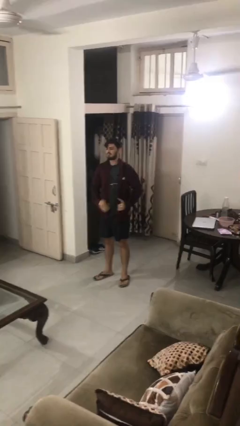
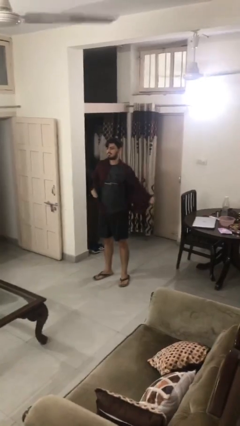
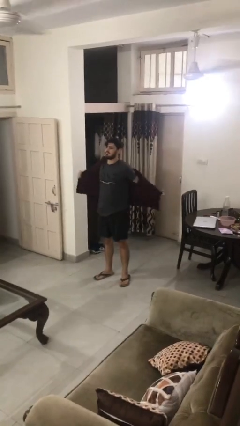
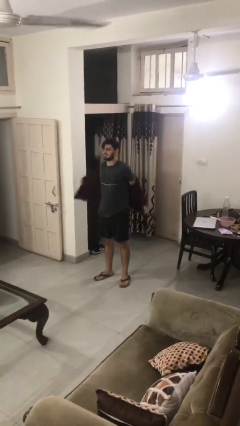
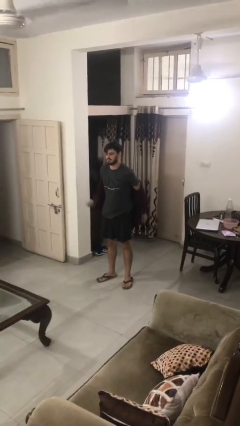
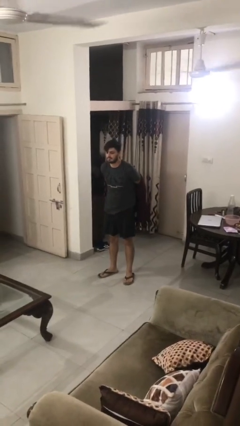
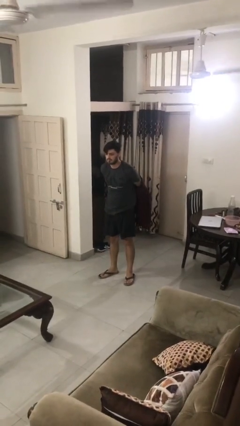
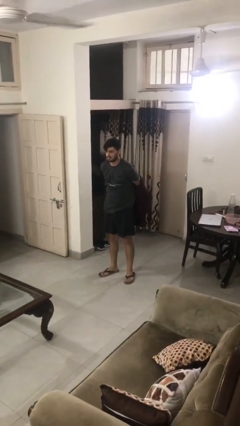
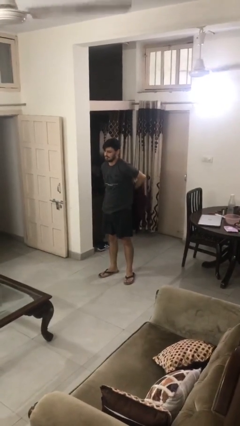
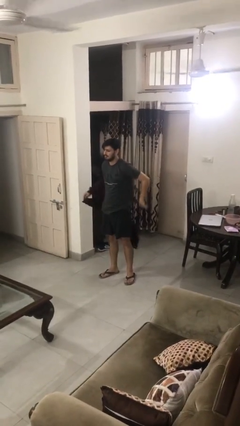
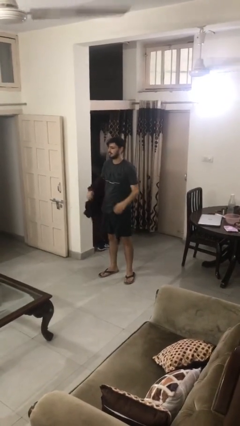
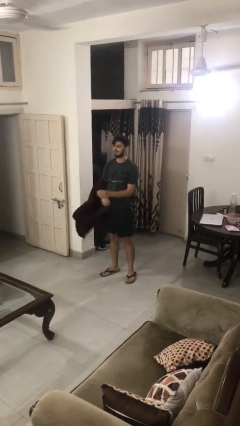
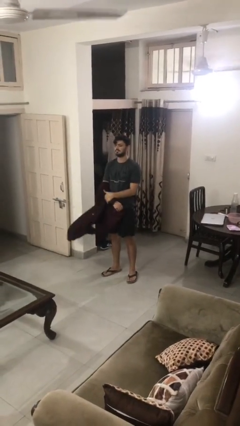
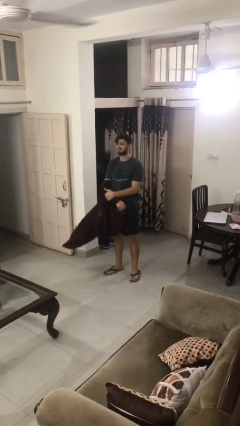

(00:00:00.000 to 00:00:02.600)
person takes off jacket

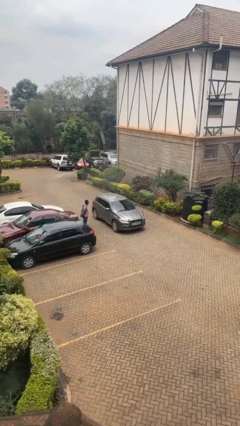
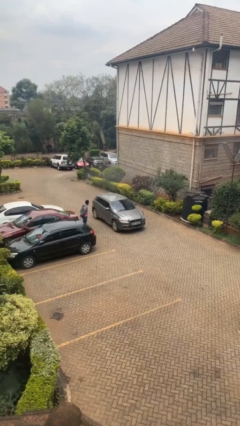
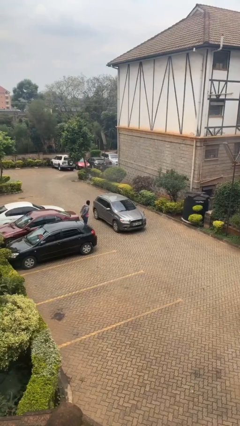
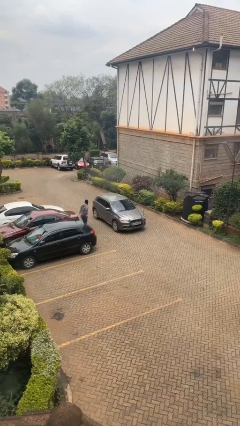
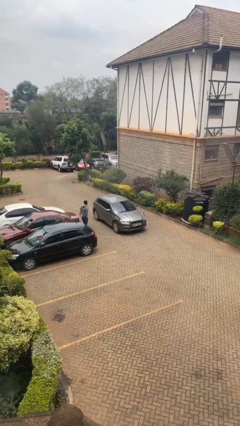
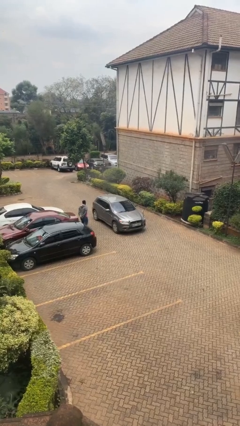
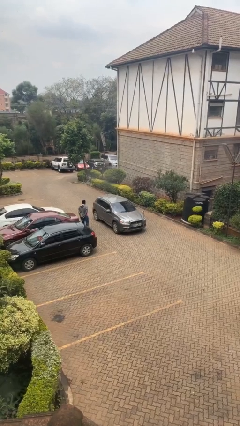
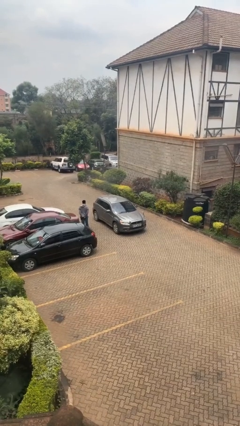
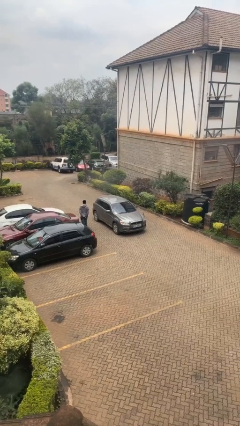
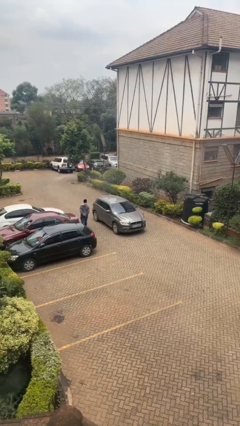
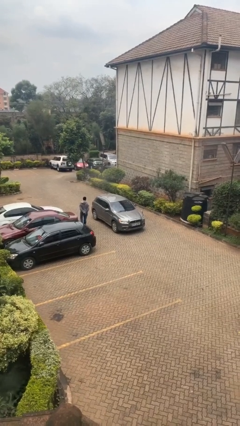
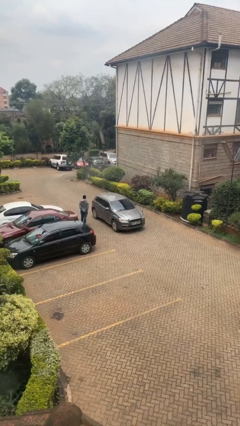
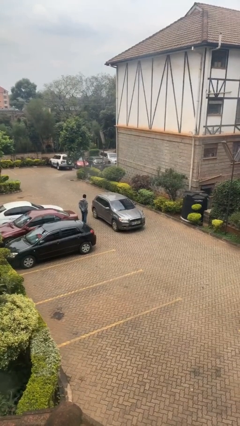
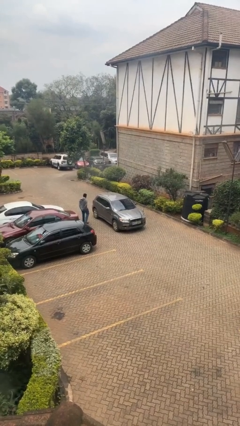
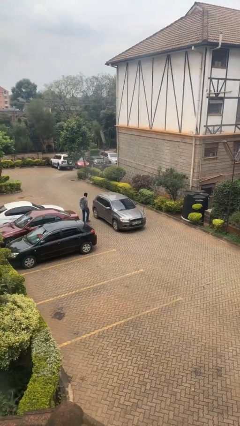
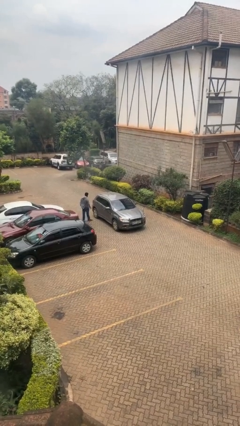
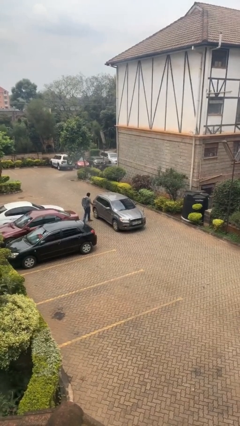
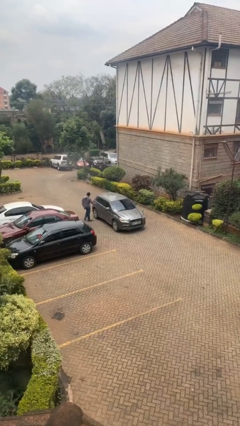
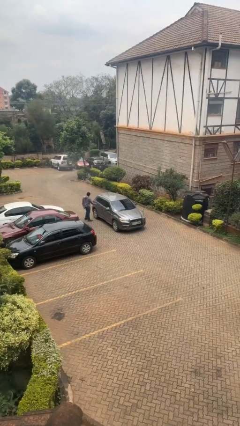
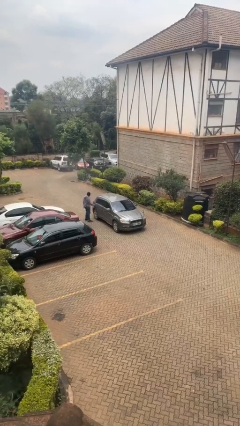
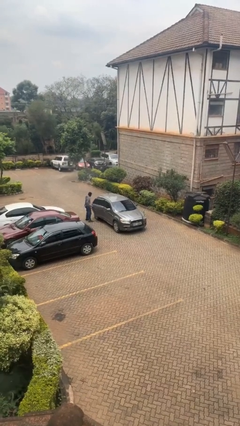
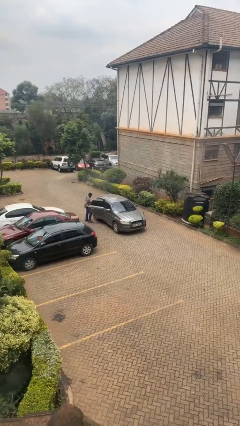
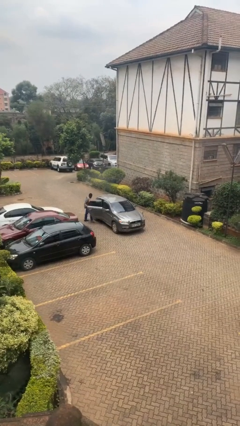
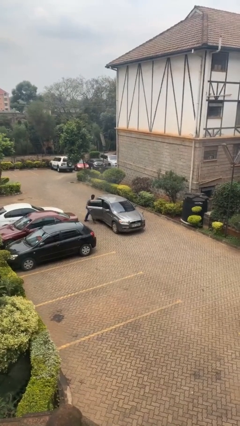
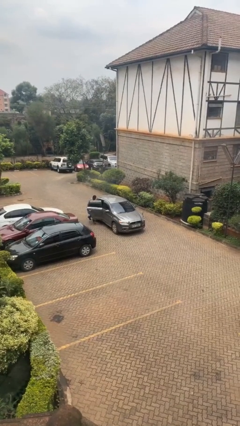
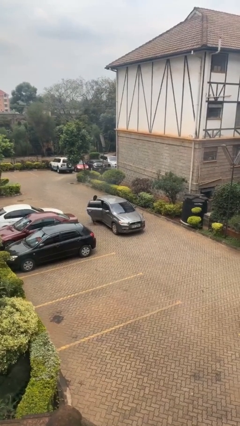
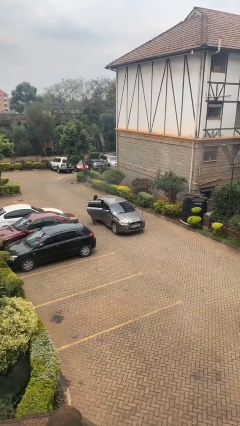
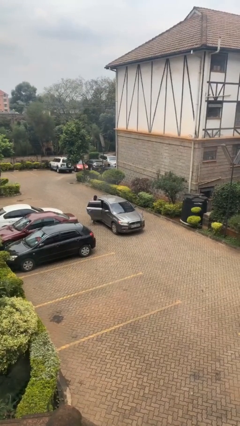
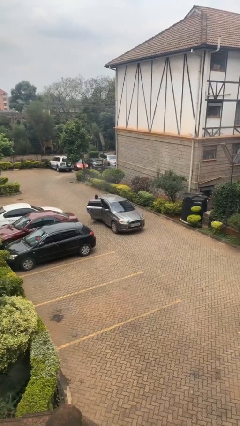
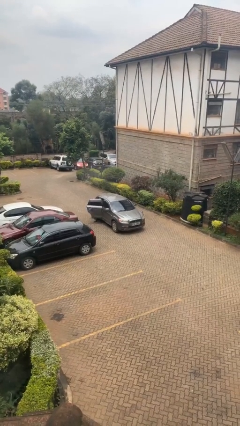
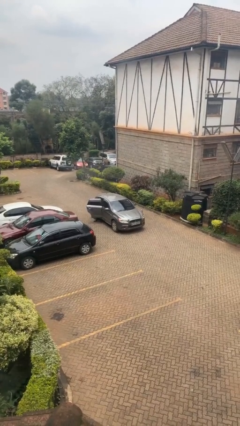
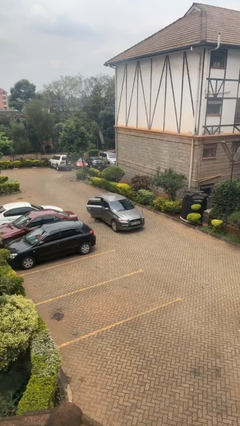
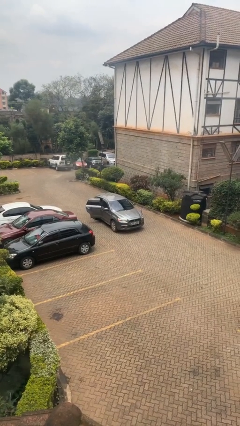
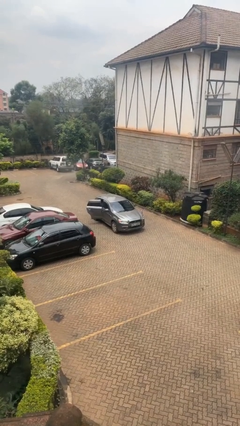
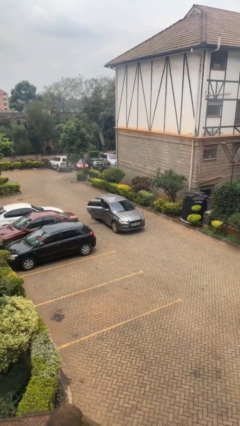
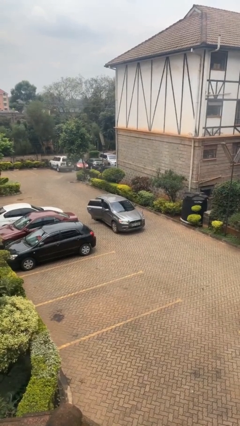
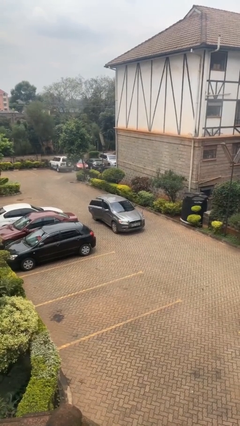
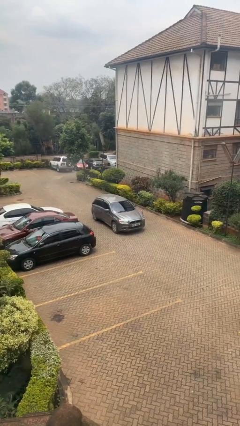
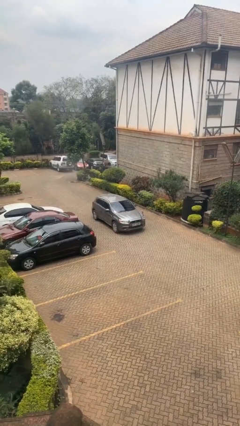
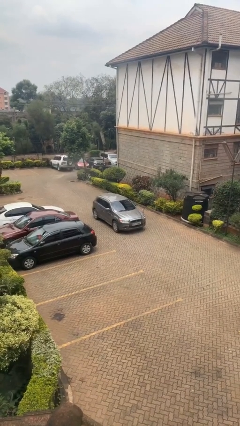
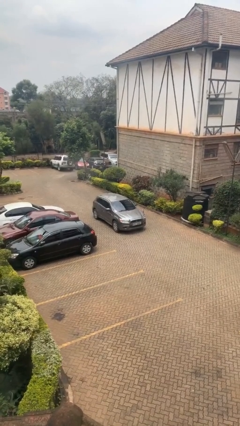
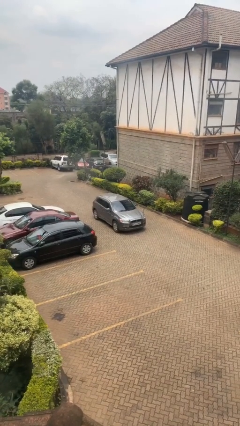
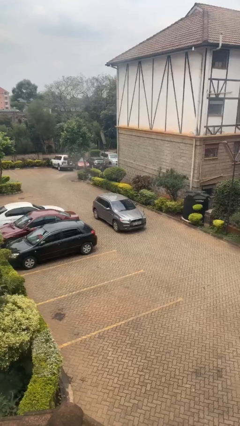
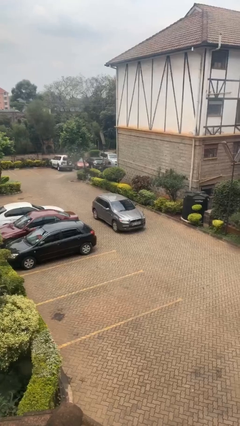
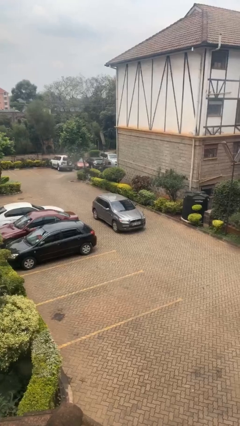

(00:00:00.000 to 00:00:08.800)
car picks up person

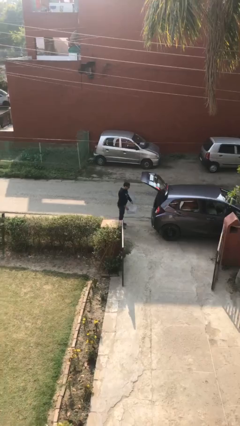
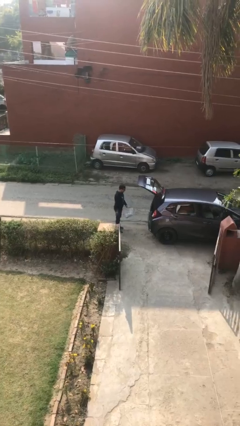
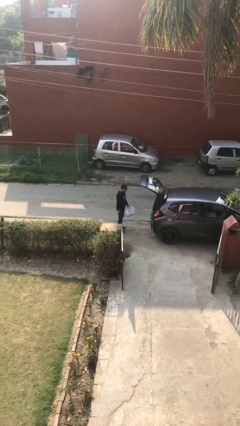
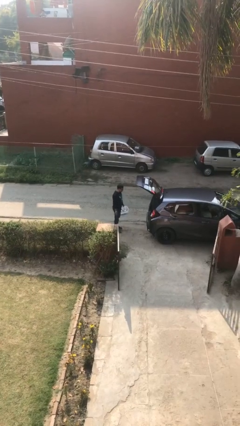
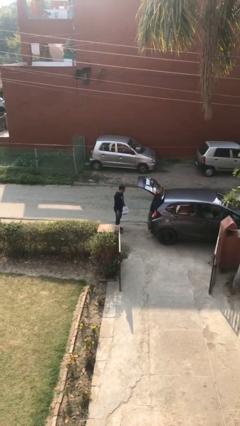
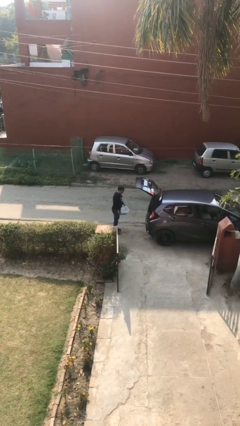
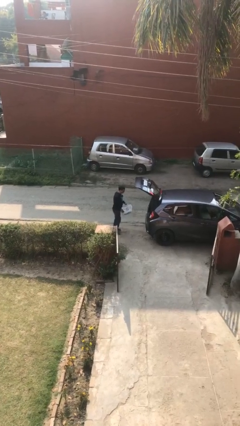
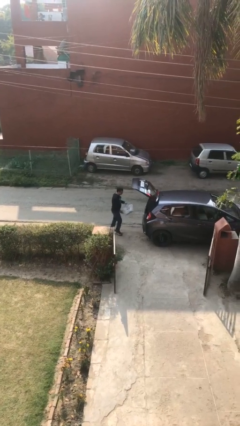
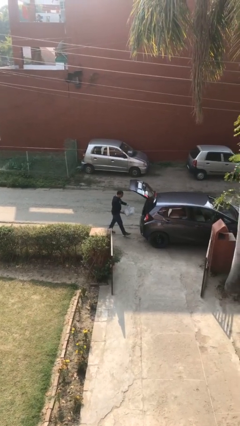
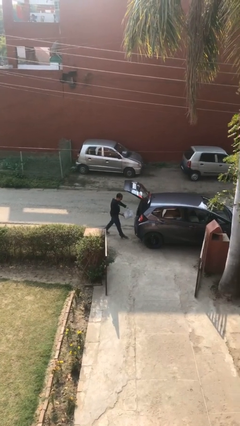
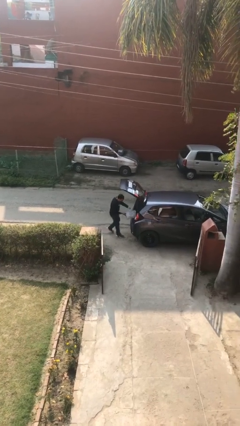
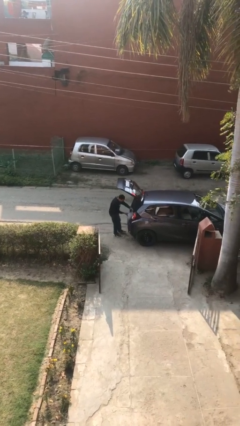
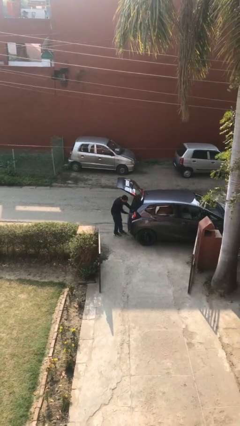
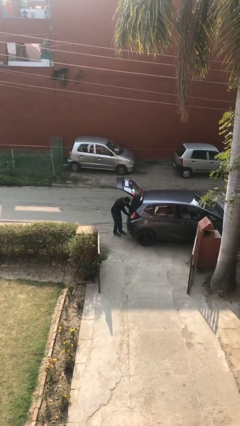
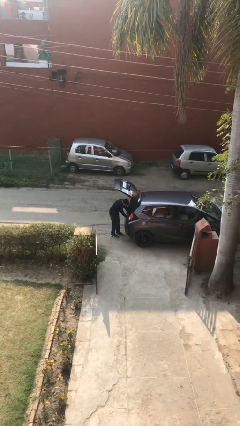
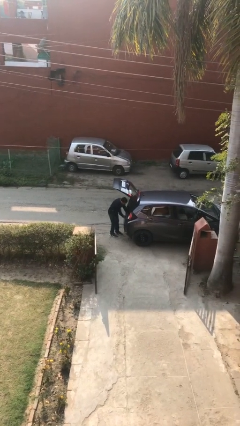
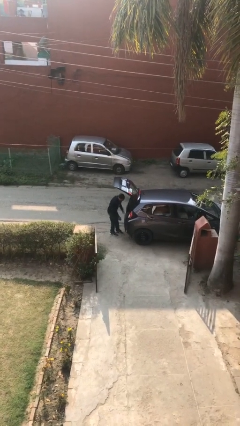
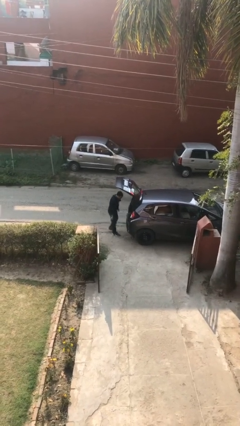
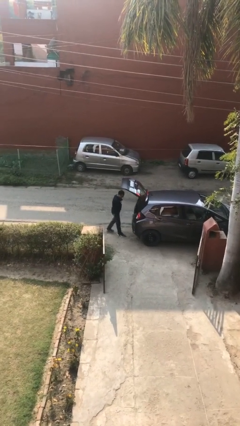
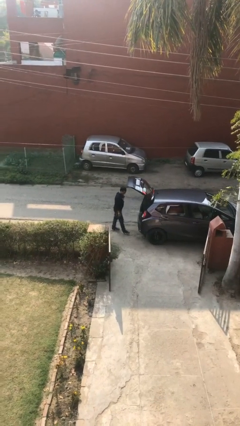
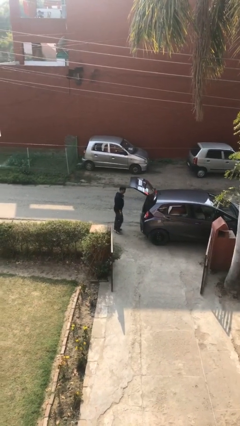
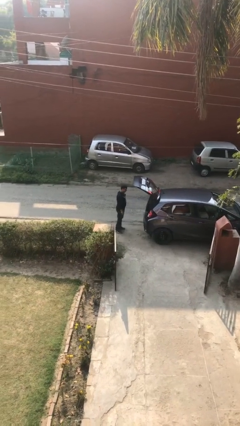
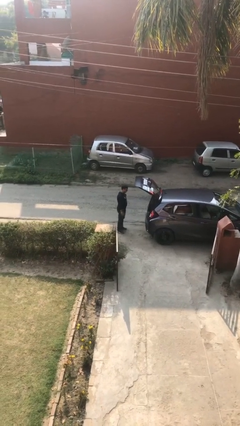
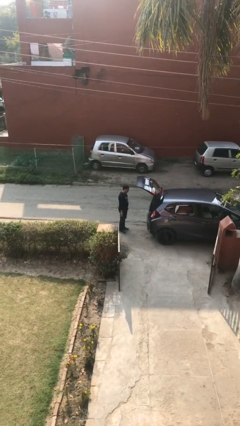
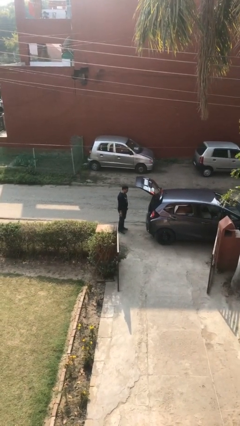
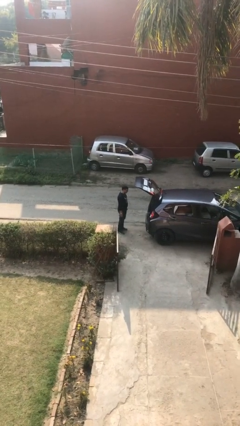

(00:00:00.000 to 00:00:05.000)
person loads car

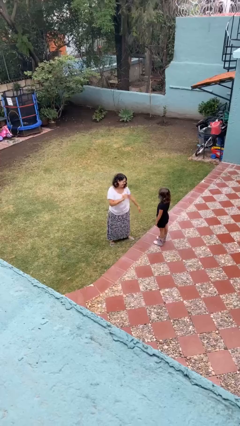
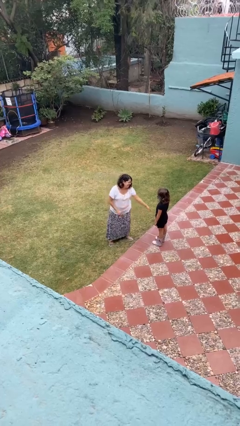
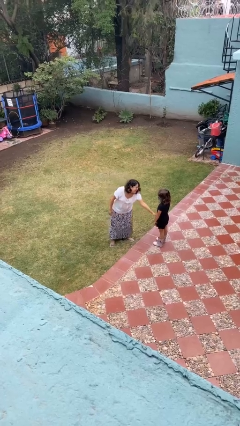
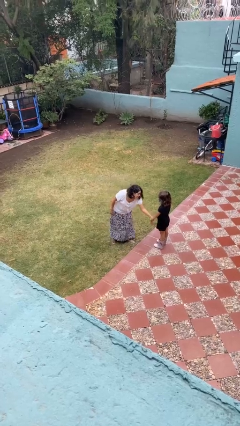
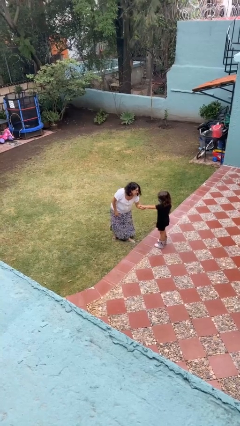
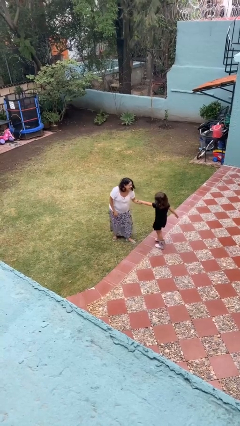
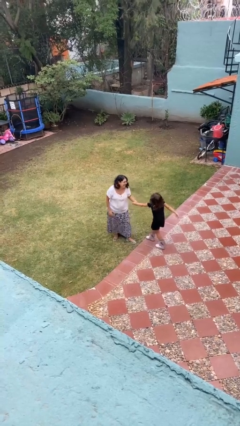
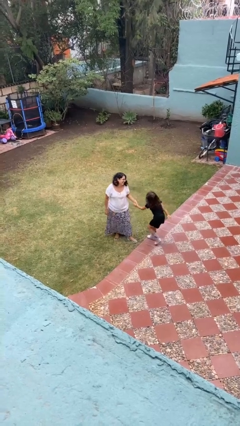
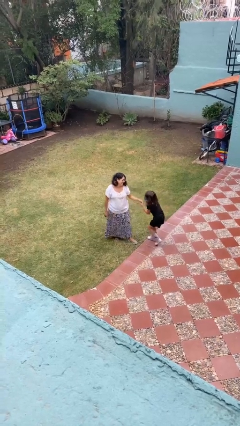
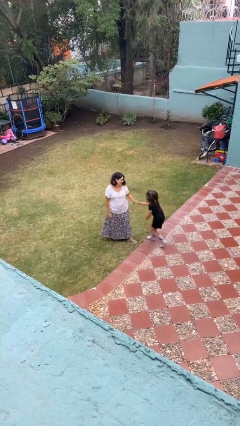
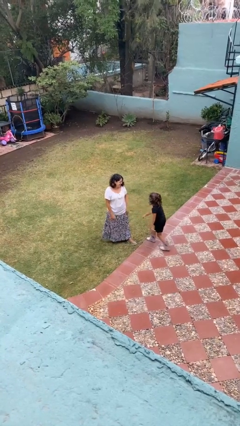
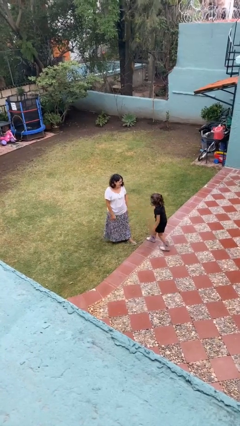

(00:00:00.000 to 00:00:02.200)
person grabs person by forearm
